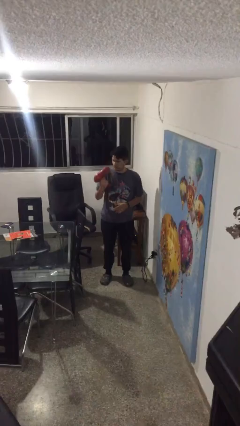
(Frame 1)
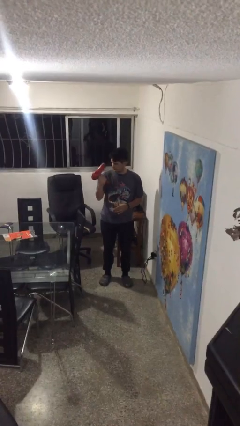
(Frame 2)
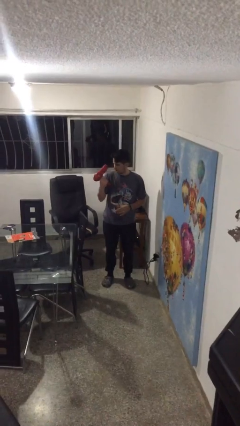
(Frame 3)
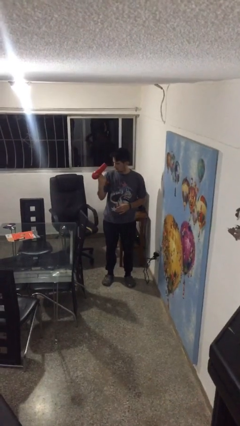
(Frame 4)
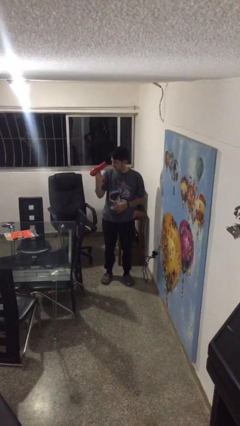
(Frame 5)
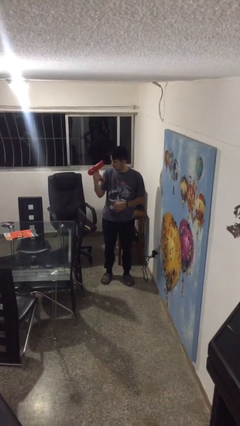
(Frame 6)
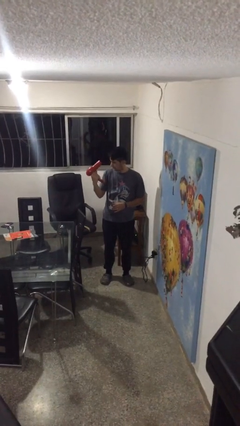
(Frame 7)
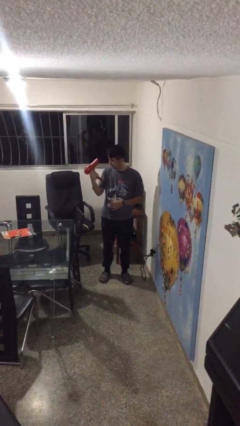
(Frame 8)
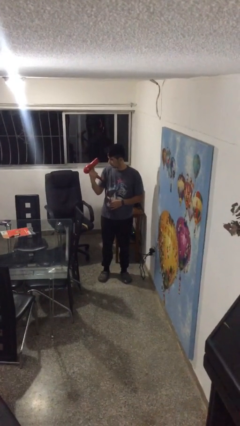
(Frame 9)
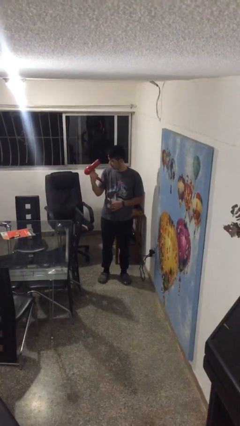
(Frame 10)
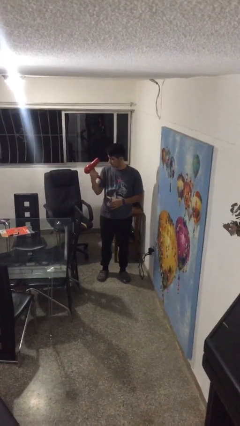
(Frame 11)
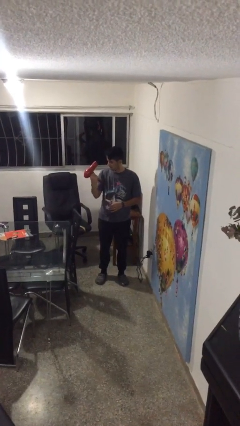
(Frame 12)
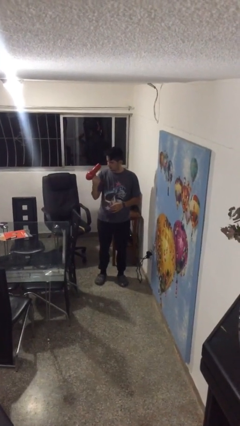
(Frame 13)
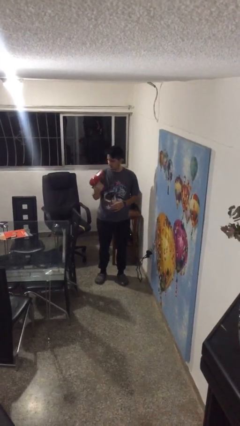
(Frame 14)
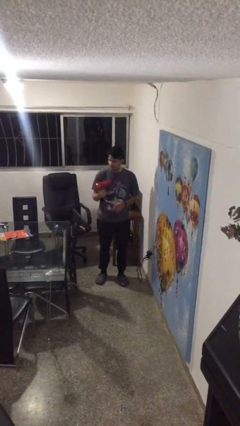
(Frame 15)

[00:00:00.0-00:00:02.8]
person dries hair with hairdryer

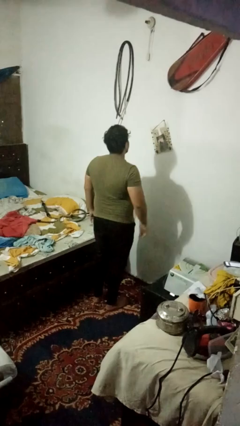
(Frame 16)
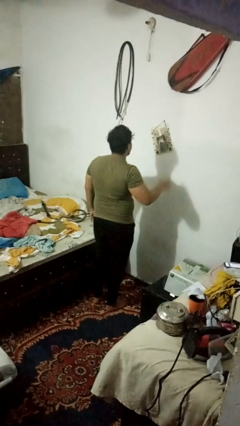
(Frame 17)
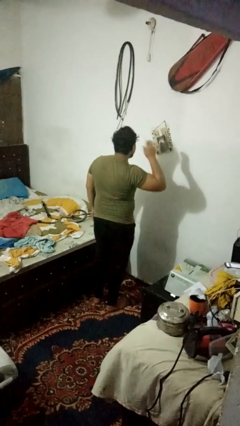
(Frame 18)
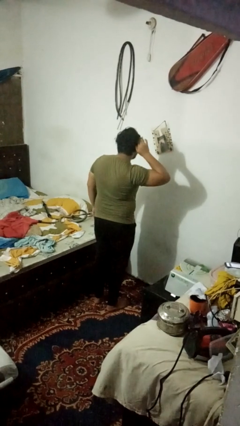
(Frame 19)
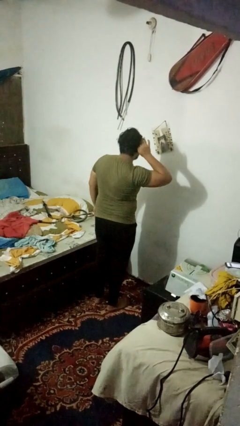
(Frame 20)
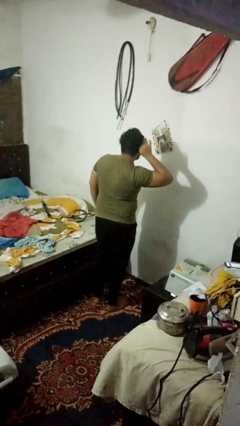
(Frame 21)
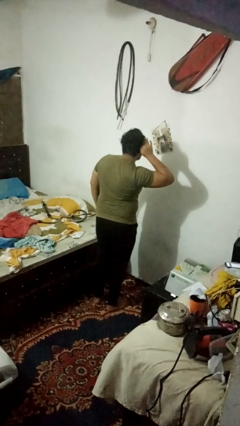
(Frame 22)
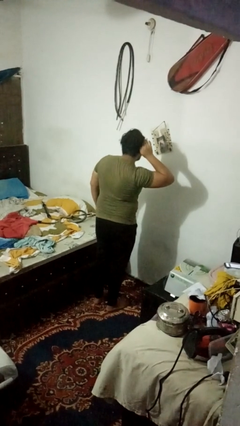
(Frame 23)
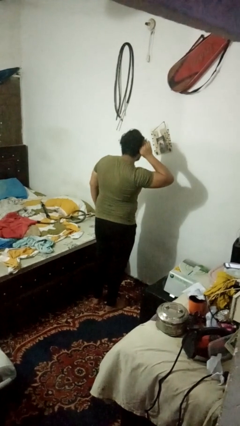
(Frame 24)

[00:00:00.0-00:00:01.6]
person gestures listen closely

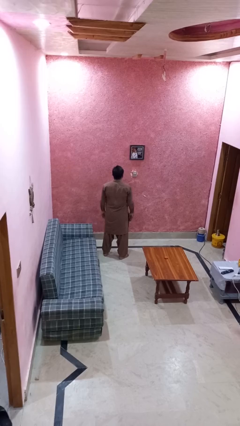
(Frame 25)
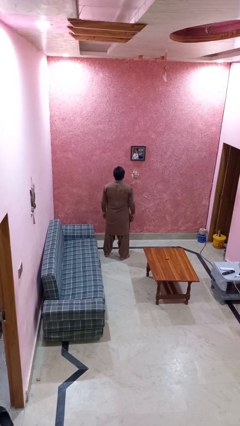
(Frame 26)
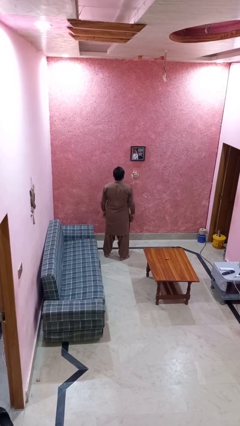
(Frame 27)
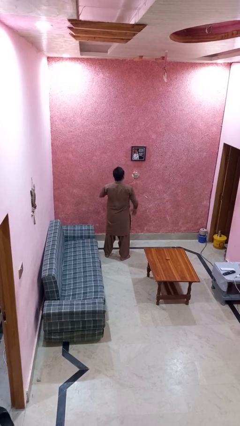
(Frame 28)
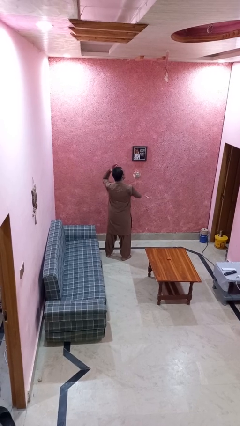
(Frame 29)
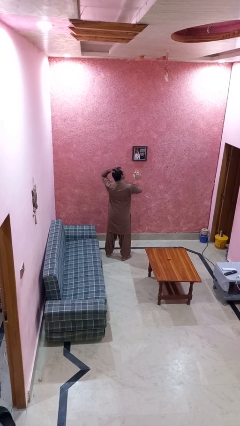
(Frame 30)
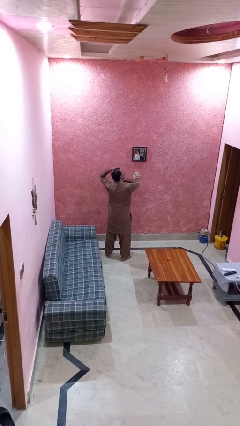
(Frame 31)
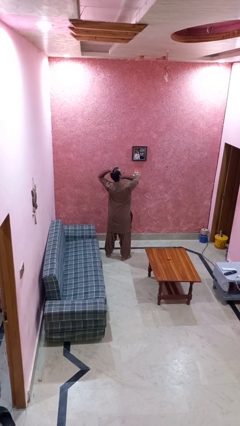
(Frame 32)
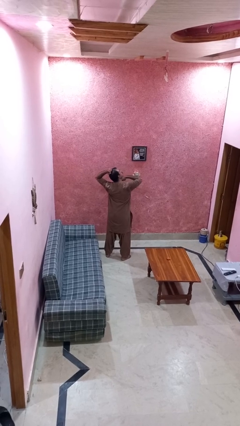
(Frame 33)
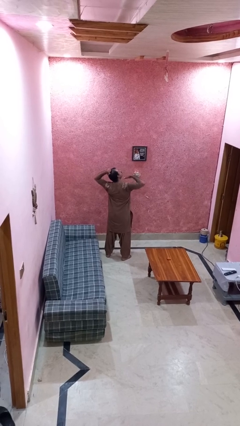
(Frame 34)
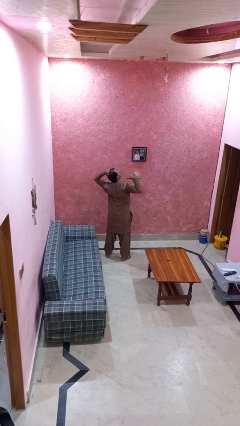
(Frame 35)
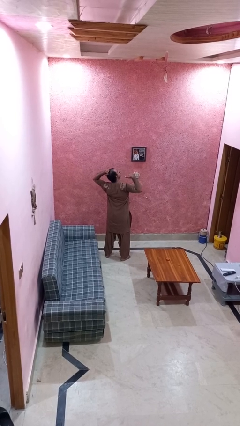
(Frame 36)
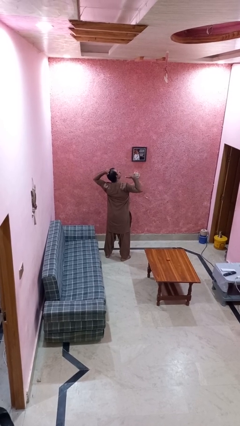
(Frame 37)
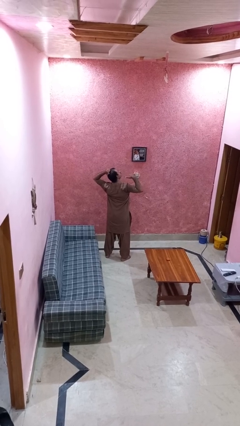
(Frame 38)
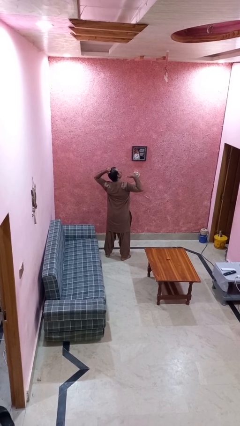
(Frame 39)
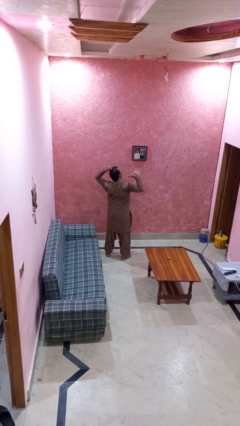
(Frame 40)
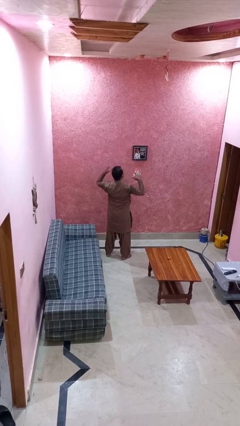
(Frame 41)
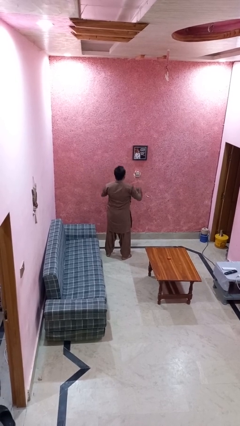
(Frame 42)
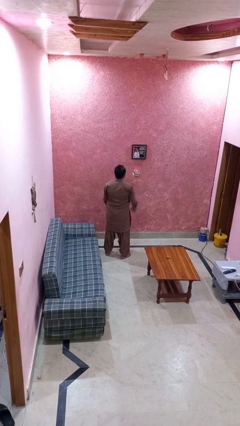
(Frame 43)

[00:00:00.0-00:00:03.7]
person gestures cut

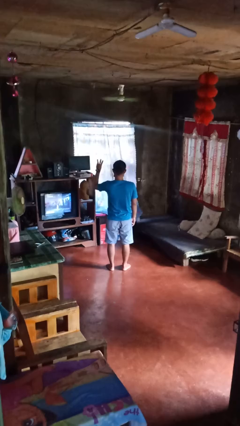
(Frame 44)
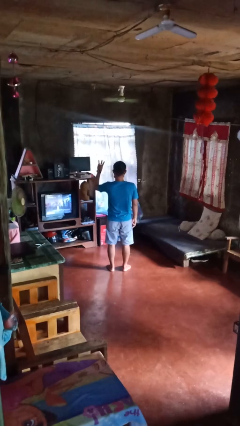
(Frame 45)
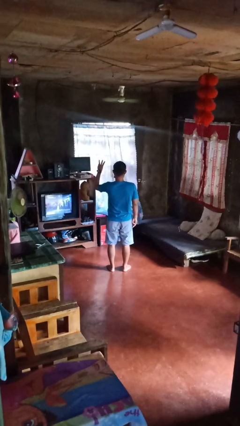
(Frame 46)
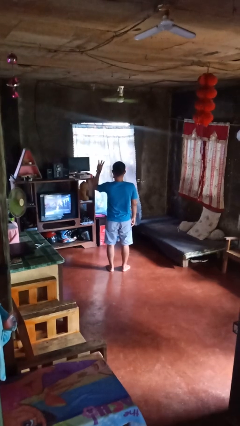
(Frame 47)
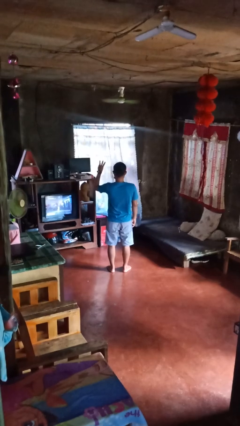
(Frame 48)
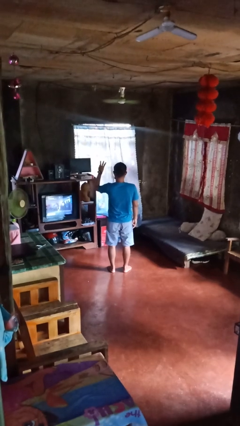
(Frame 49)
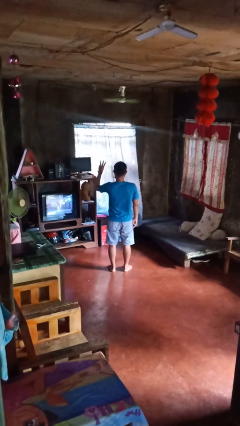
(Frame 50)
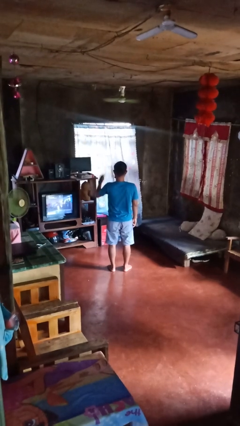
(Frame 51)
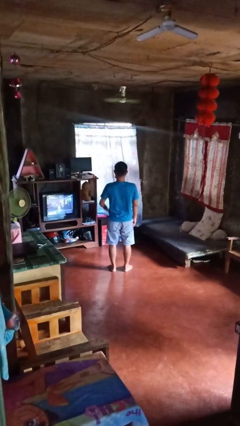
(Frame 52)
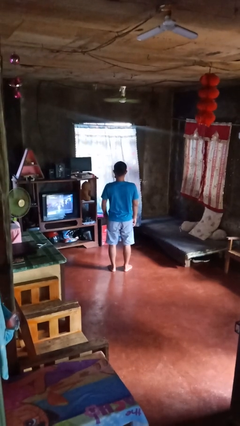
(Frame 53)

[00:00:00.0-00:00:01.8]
person gestures number three

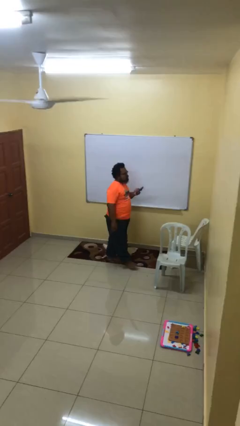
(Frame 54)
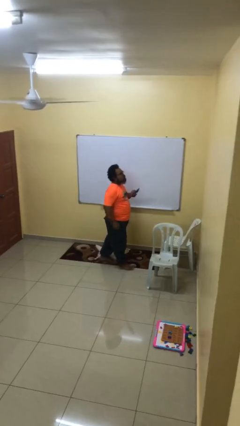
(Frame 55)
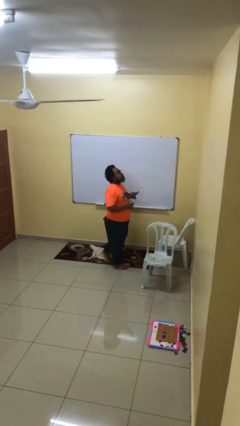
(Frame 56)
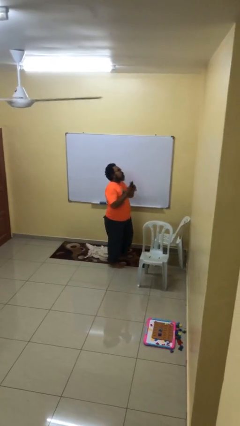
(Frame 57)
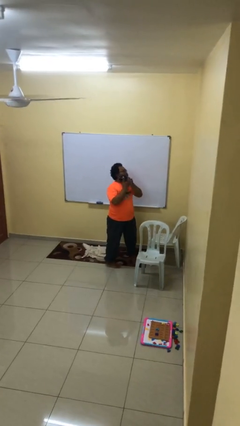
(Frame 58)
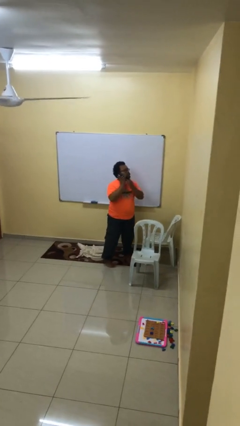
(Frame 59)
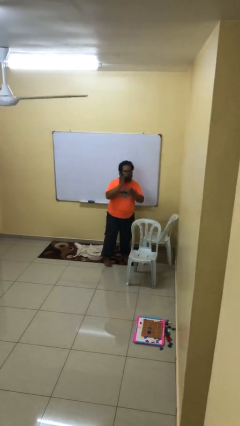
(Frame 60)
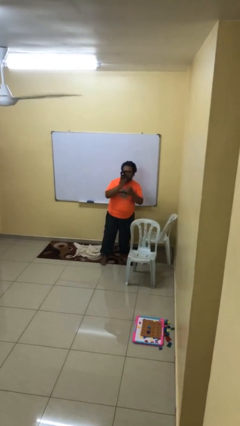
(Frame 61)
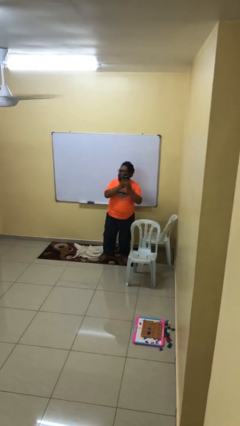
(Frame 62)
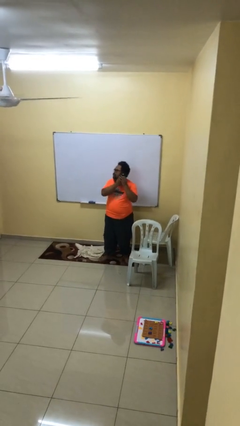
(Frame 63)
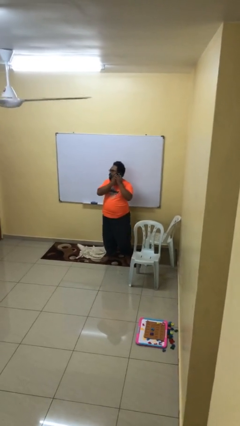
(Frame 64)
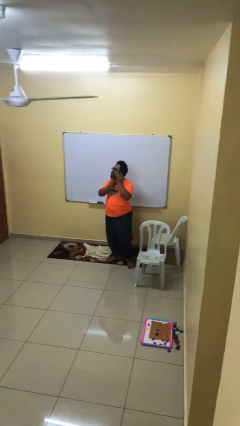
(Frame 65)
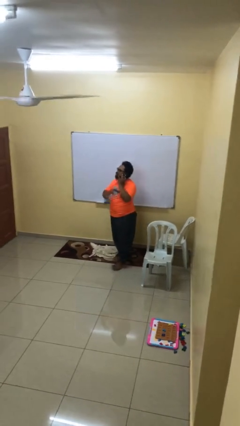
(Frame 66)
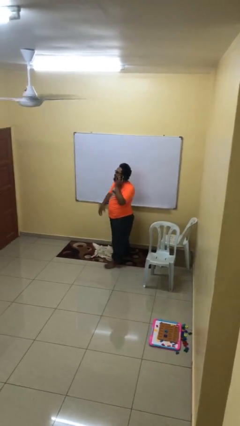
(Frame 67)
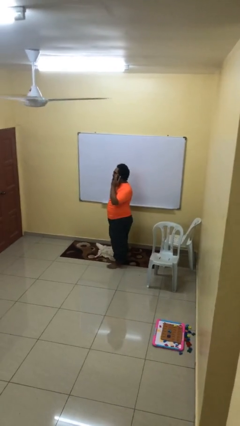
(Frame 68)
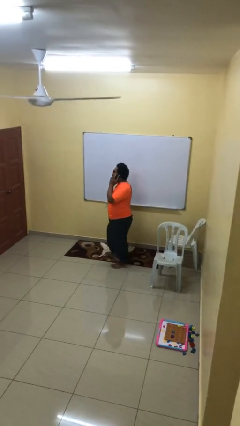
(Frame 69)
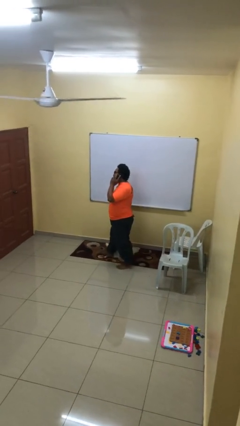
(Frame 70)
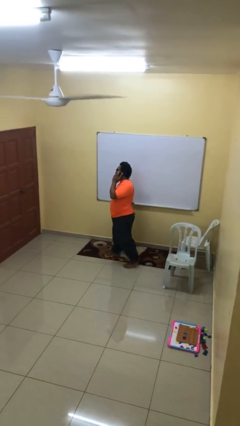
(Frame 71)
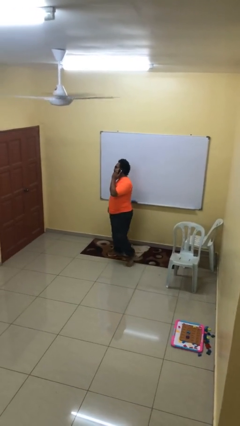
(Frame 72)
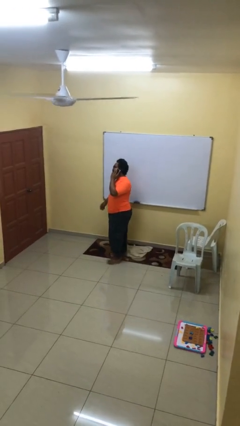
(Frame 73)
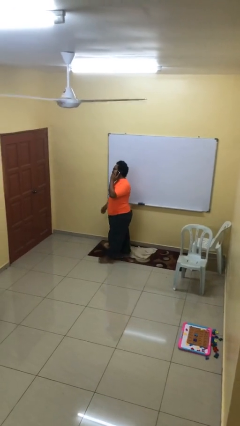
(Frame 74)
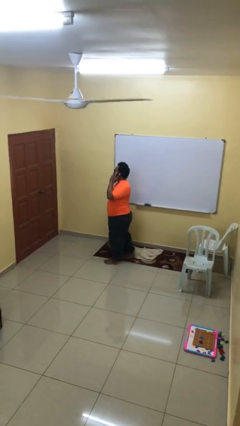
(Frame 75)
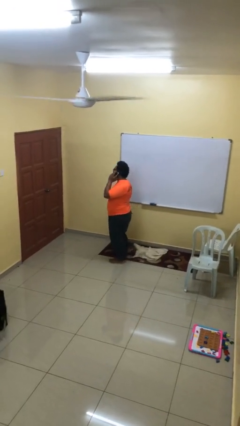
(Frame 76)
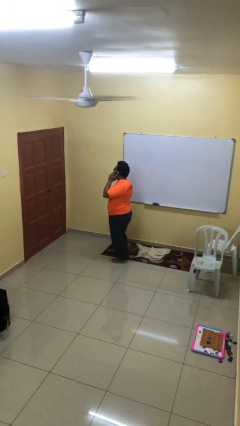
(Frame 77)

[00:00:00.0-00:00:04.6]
person talks on phone

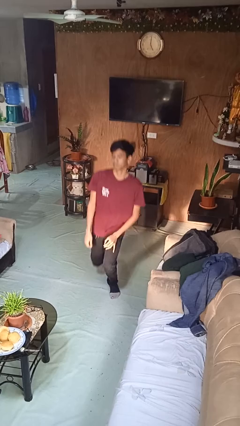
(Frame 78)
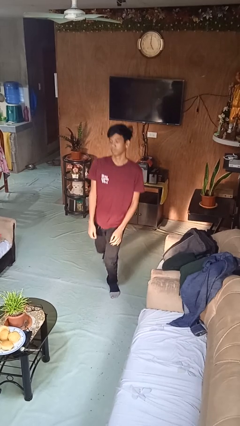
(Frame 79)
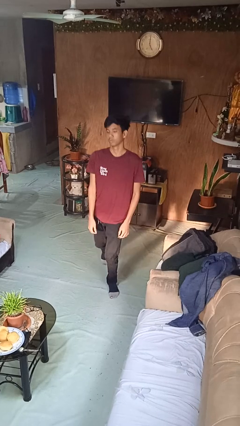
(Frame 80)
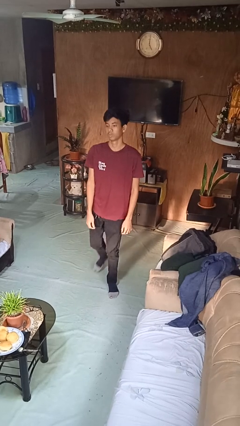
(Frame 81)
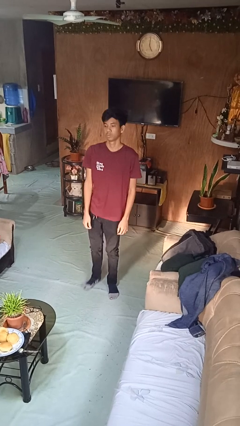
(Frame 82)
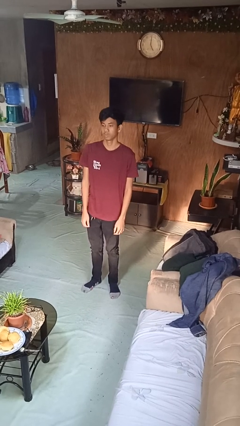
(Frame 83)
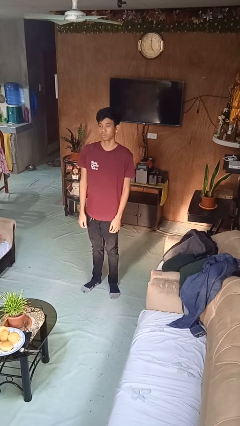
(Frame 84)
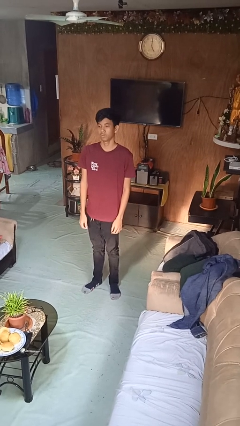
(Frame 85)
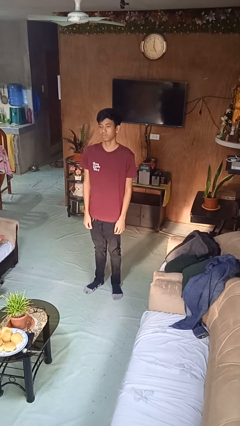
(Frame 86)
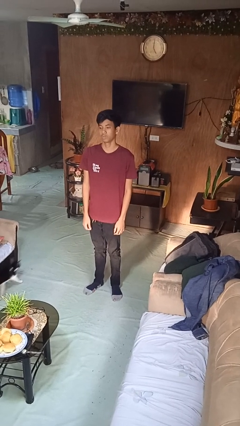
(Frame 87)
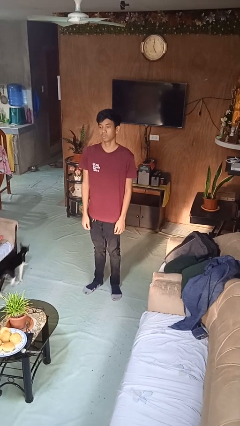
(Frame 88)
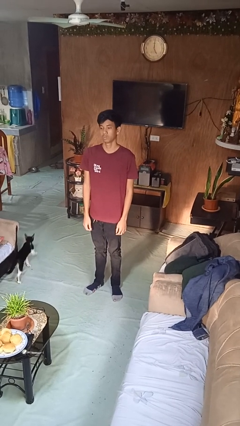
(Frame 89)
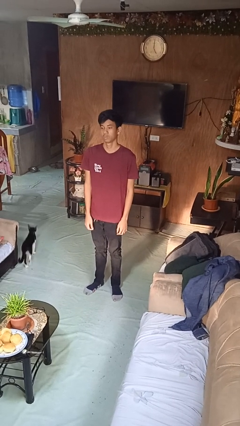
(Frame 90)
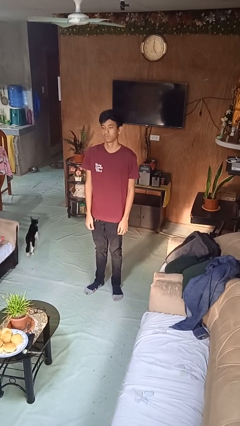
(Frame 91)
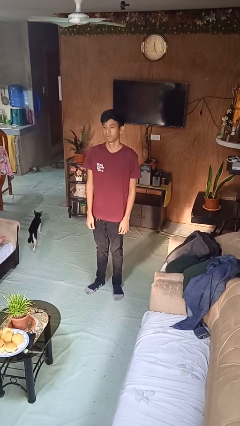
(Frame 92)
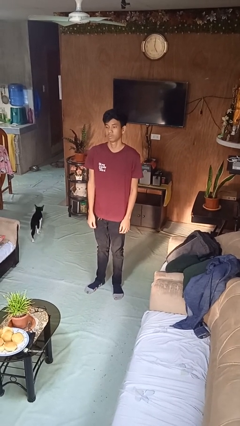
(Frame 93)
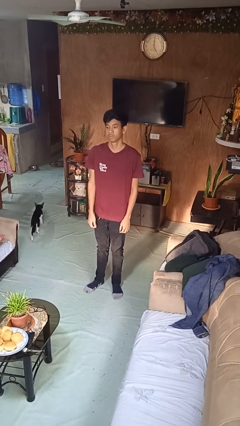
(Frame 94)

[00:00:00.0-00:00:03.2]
person stands up from floor
